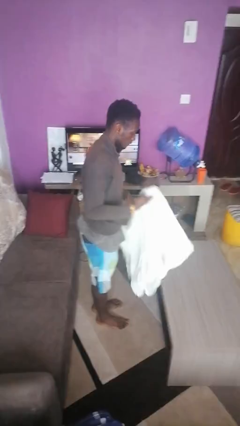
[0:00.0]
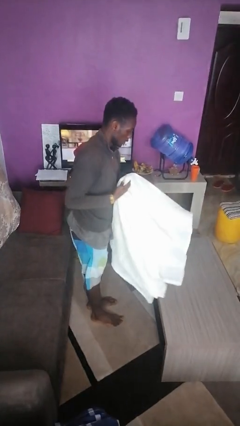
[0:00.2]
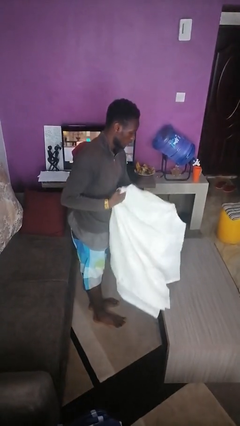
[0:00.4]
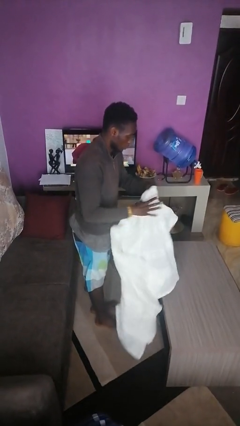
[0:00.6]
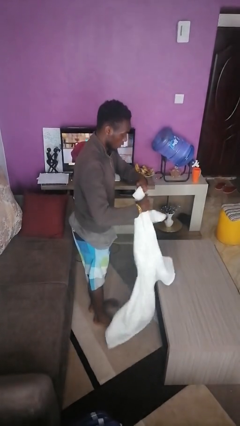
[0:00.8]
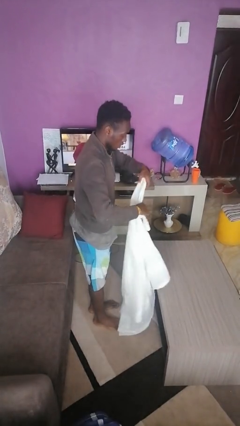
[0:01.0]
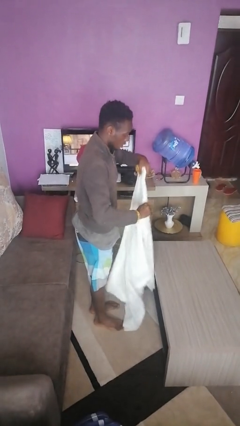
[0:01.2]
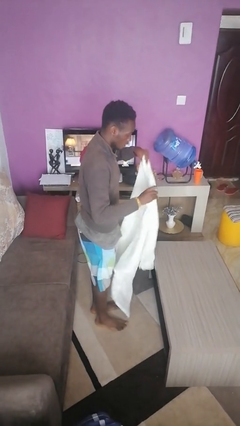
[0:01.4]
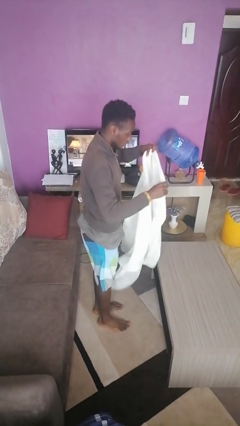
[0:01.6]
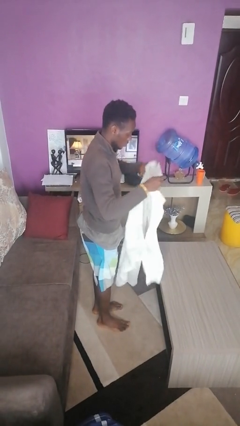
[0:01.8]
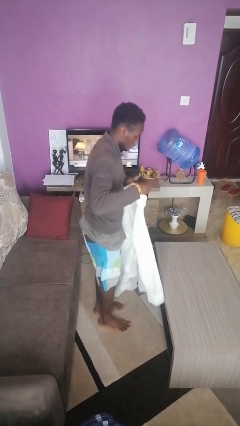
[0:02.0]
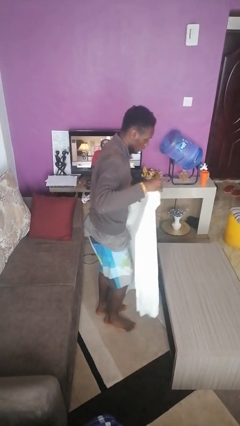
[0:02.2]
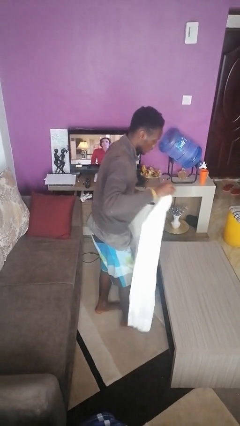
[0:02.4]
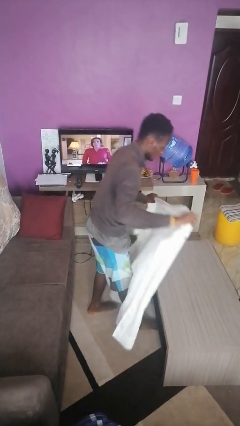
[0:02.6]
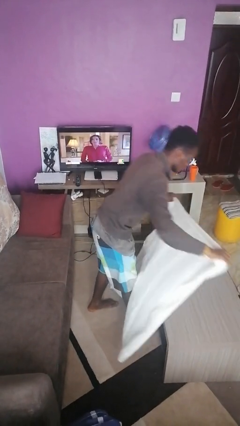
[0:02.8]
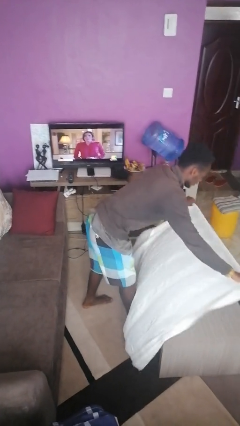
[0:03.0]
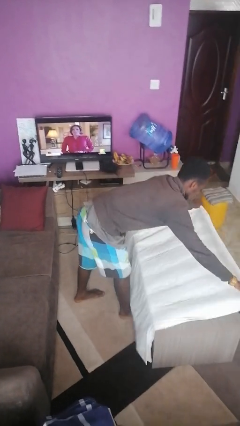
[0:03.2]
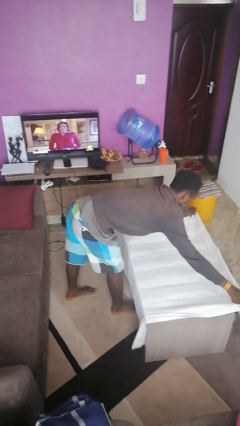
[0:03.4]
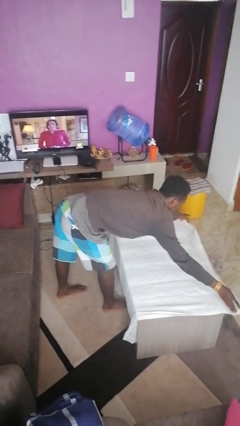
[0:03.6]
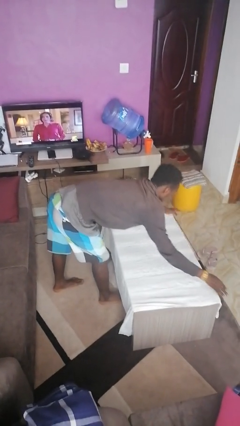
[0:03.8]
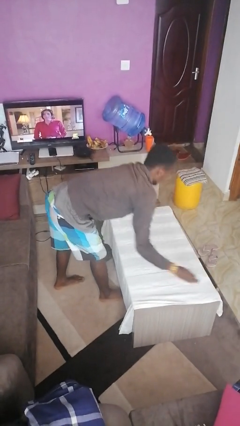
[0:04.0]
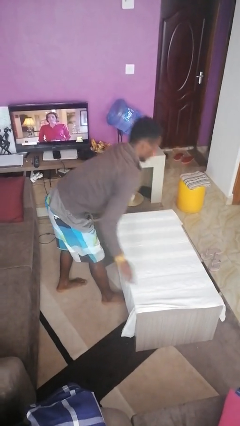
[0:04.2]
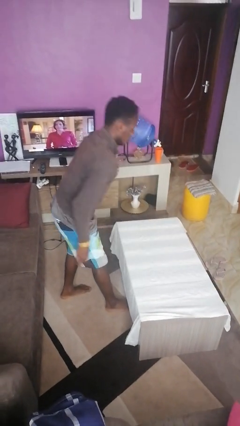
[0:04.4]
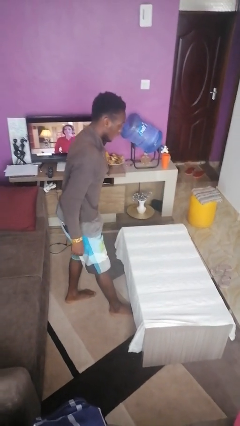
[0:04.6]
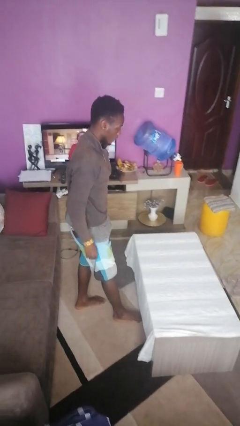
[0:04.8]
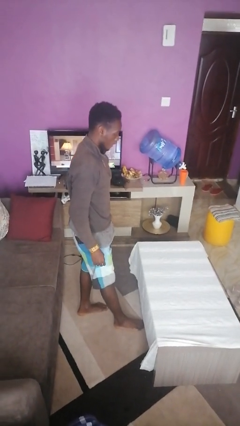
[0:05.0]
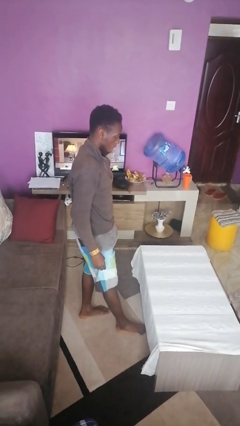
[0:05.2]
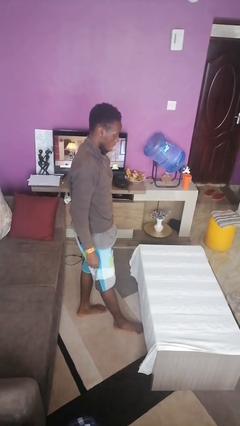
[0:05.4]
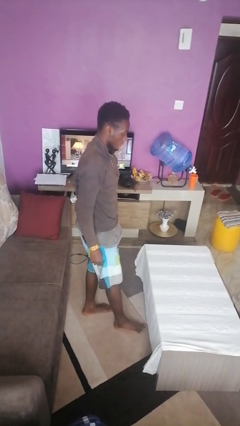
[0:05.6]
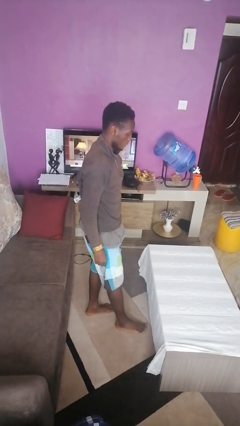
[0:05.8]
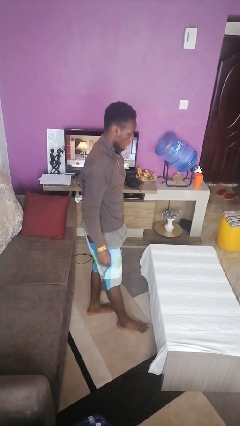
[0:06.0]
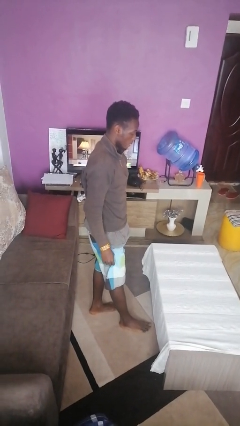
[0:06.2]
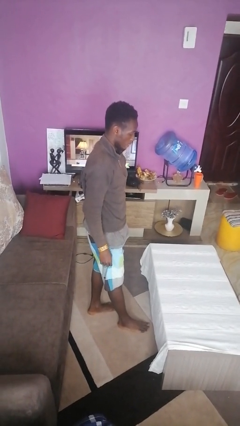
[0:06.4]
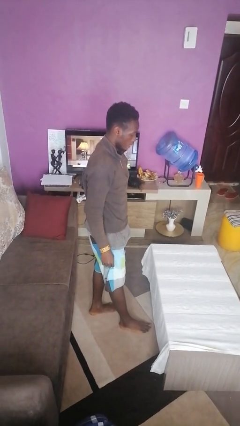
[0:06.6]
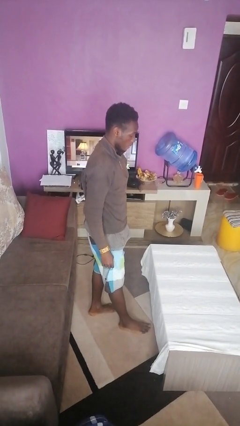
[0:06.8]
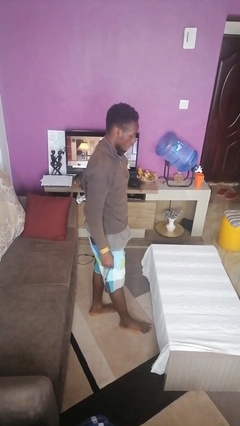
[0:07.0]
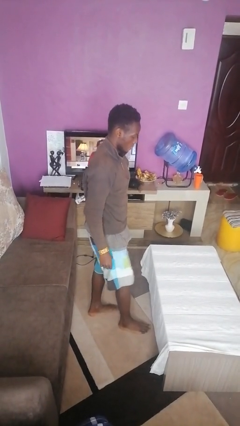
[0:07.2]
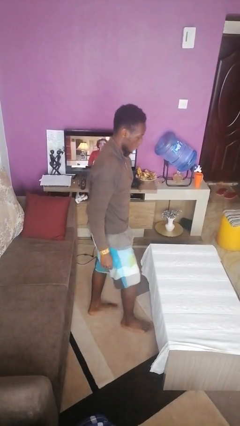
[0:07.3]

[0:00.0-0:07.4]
person spreads tablecloth

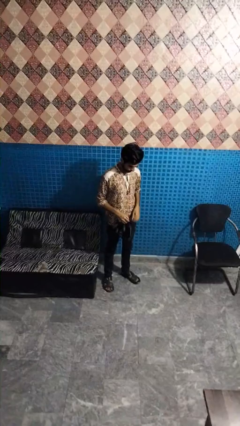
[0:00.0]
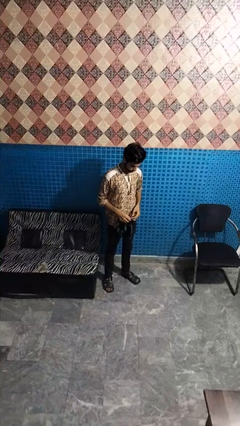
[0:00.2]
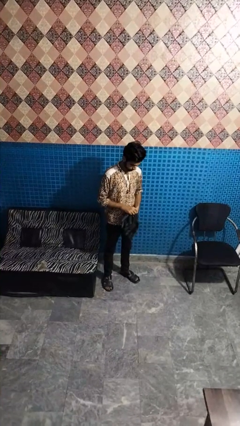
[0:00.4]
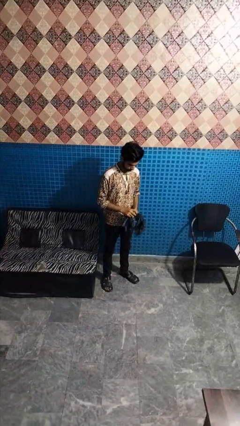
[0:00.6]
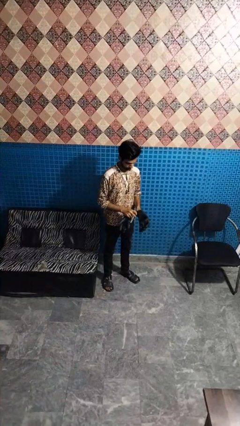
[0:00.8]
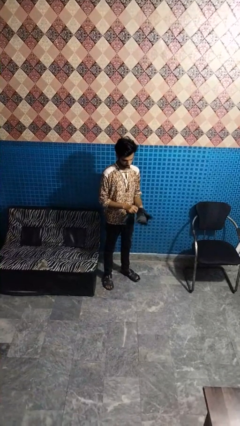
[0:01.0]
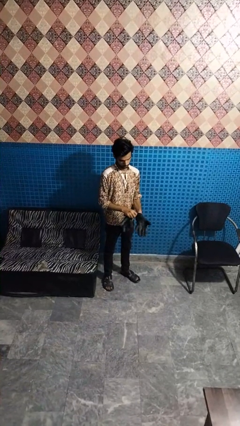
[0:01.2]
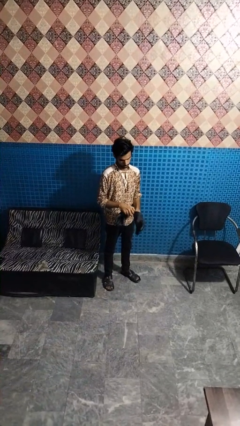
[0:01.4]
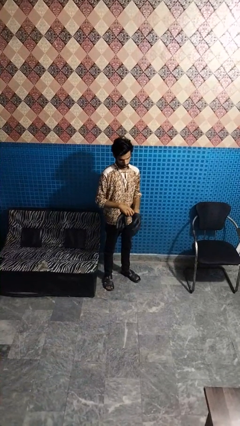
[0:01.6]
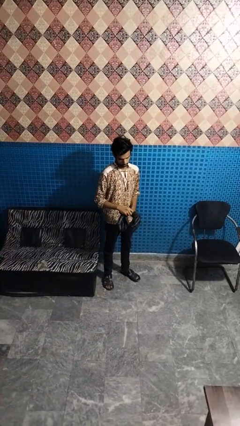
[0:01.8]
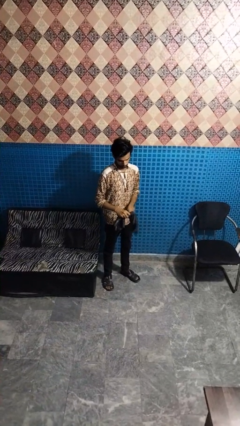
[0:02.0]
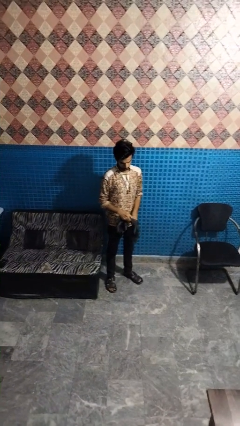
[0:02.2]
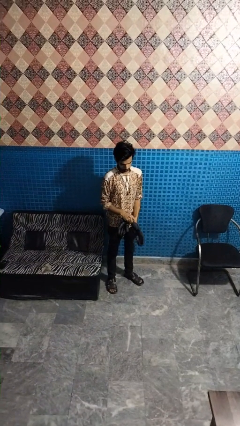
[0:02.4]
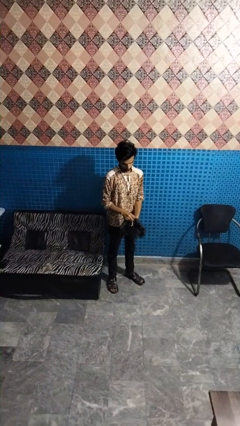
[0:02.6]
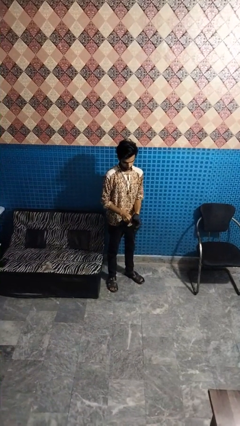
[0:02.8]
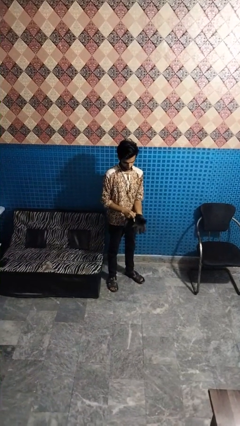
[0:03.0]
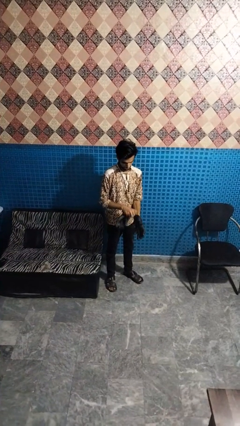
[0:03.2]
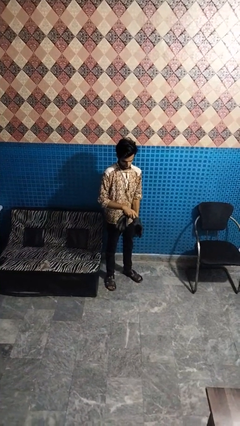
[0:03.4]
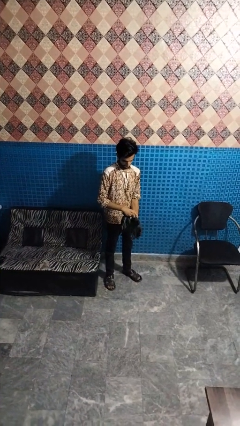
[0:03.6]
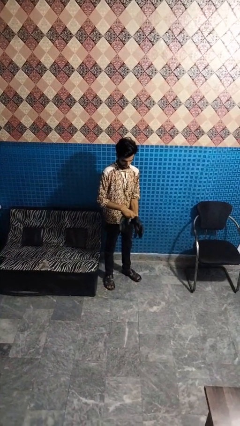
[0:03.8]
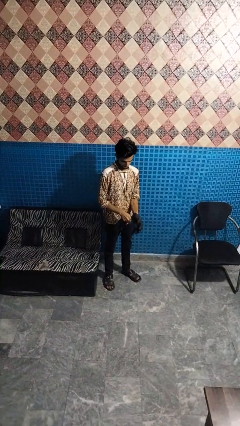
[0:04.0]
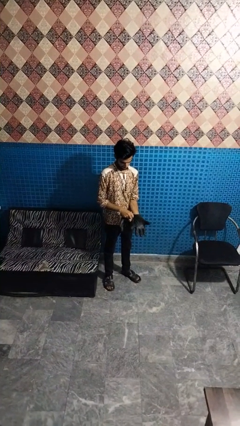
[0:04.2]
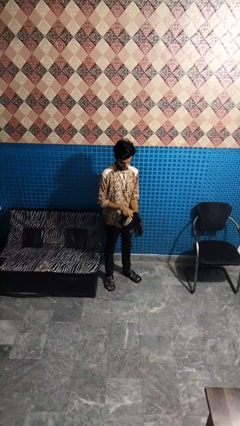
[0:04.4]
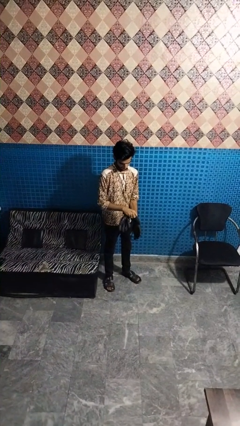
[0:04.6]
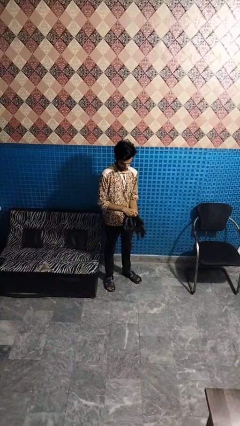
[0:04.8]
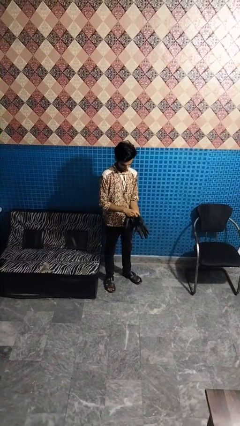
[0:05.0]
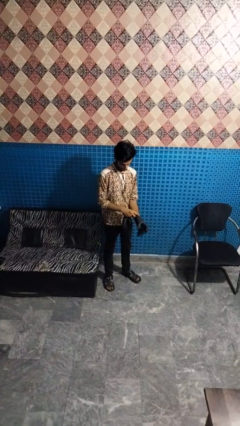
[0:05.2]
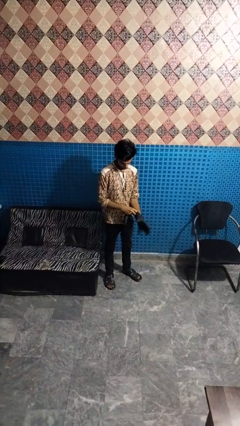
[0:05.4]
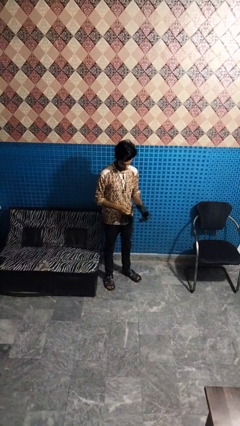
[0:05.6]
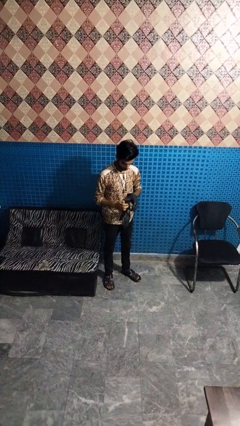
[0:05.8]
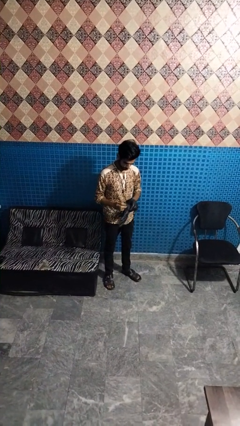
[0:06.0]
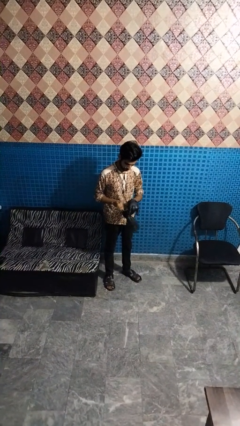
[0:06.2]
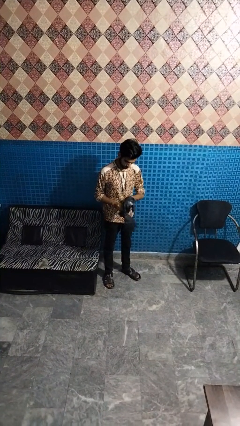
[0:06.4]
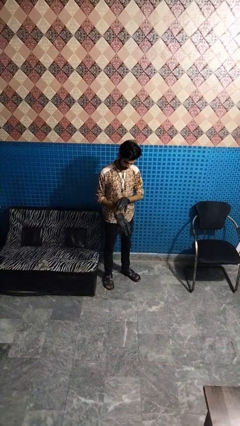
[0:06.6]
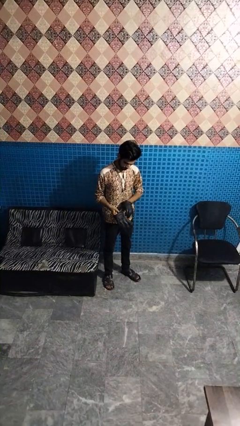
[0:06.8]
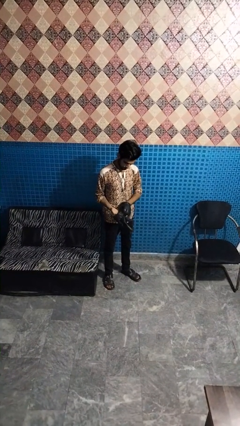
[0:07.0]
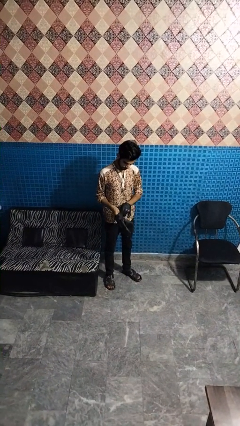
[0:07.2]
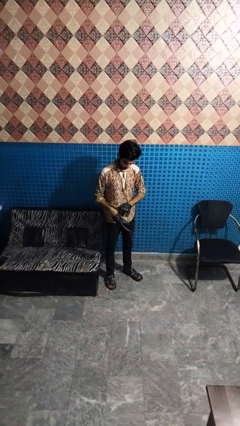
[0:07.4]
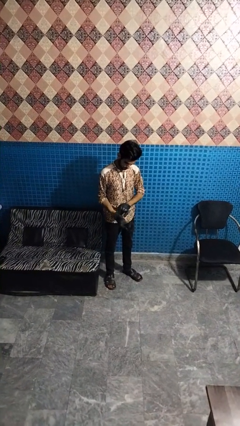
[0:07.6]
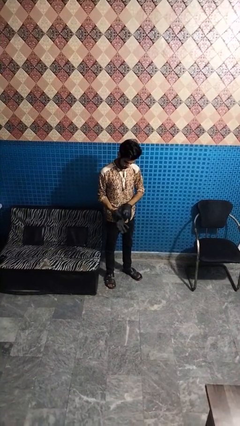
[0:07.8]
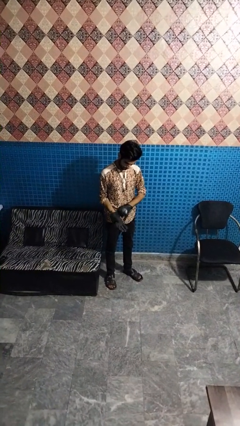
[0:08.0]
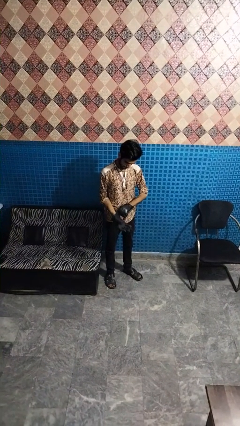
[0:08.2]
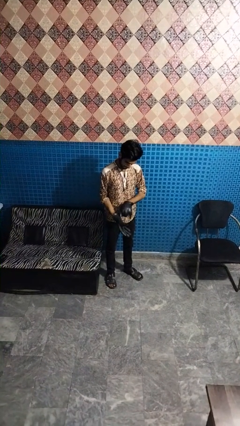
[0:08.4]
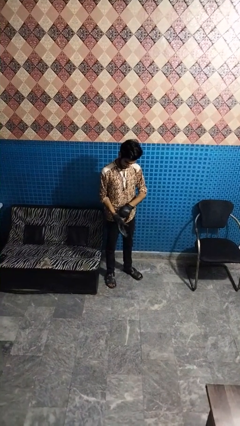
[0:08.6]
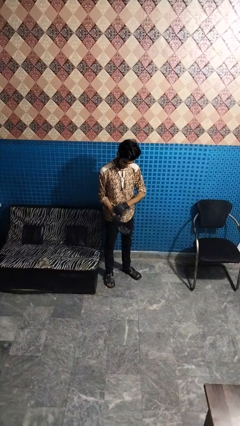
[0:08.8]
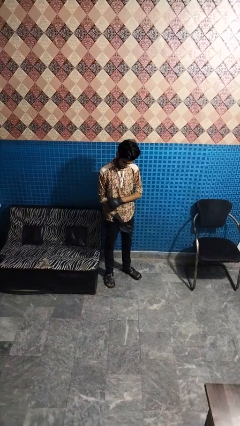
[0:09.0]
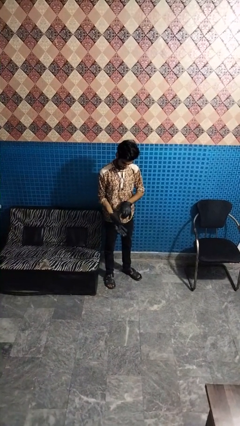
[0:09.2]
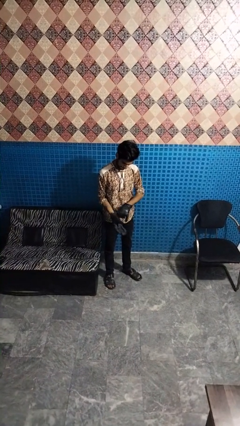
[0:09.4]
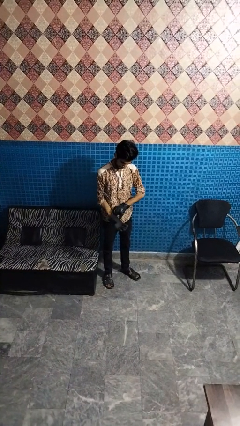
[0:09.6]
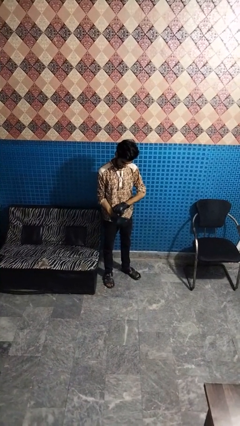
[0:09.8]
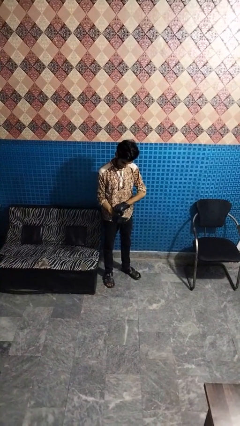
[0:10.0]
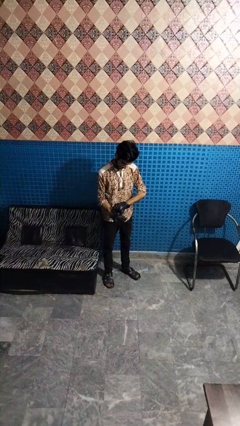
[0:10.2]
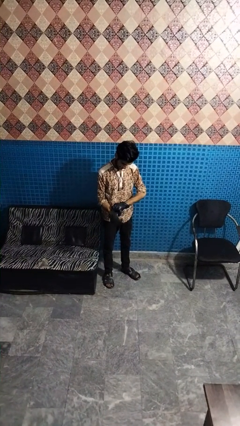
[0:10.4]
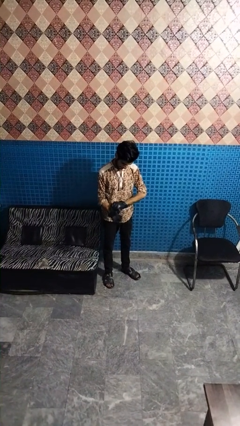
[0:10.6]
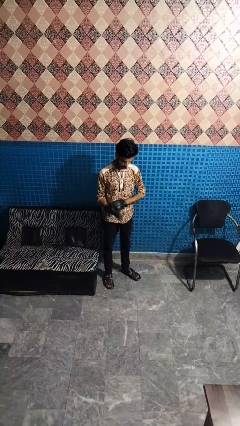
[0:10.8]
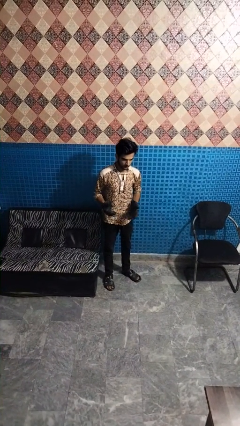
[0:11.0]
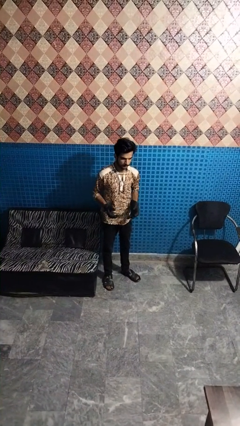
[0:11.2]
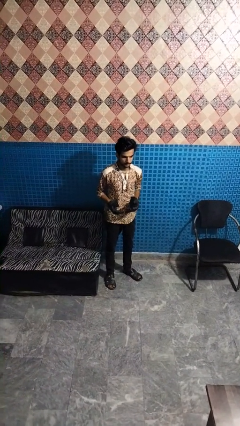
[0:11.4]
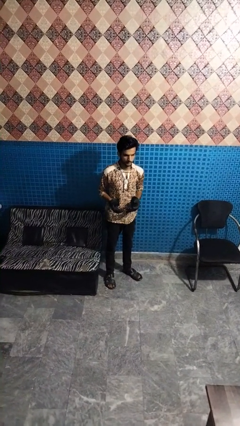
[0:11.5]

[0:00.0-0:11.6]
person puts on gloves
